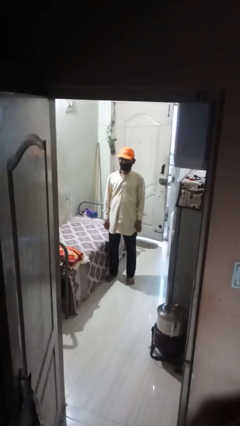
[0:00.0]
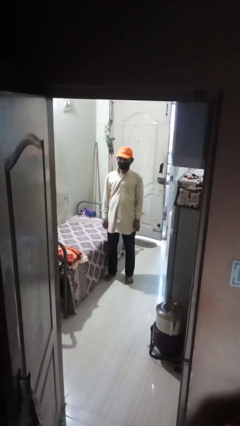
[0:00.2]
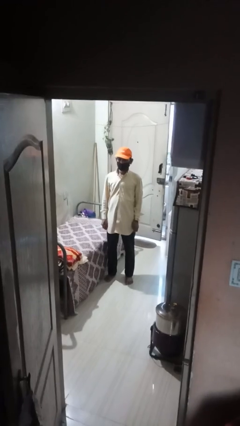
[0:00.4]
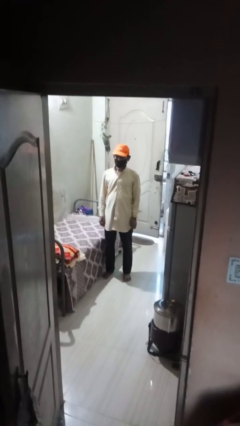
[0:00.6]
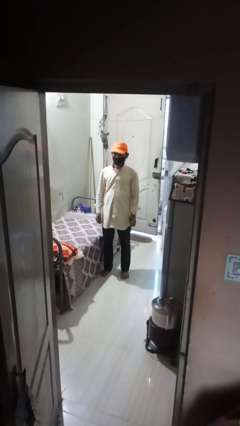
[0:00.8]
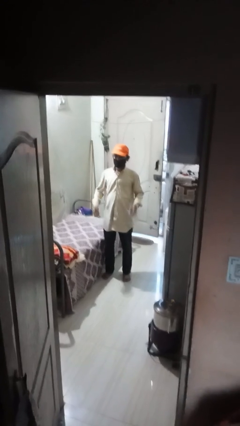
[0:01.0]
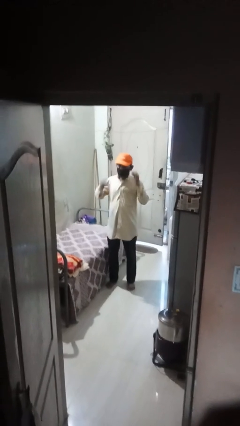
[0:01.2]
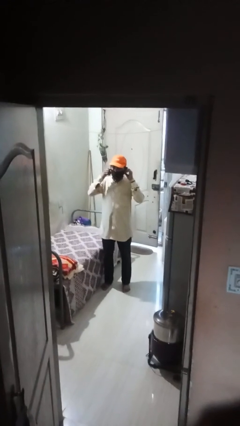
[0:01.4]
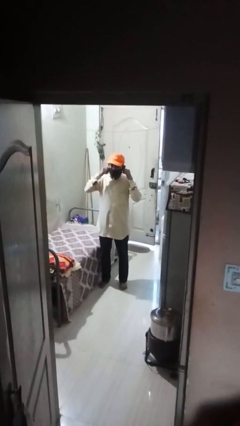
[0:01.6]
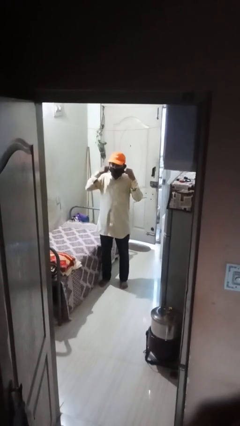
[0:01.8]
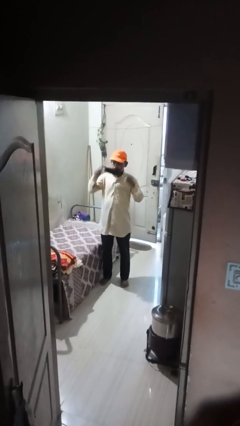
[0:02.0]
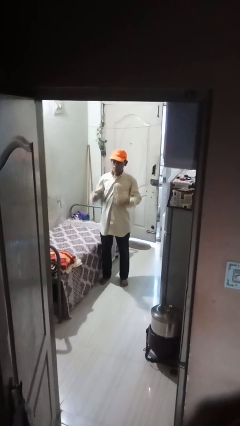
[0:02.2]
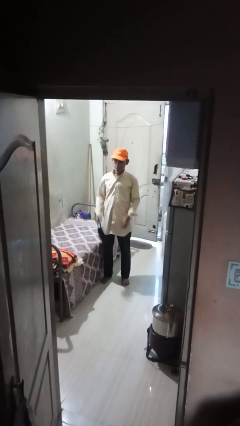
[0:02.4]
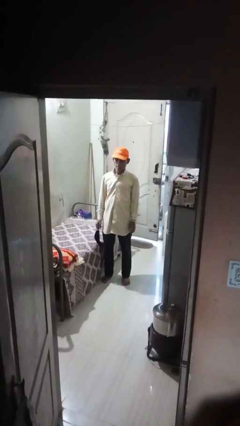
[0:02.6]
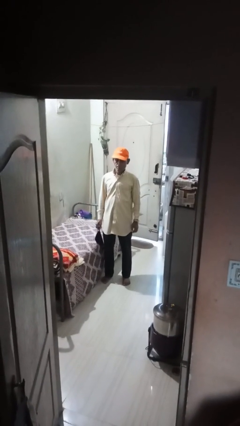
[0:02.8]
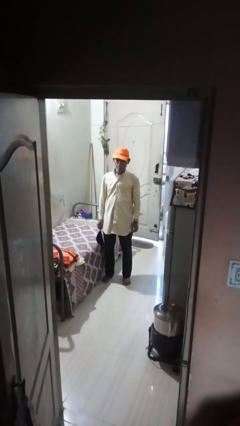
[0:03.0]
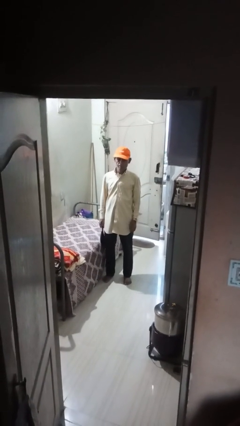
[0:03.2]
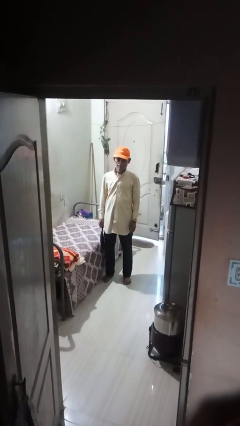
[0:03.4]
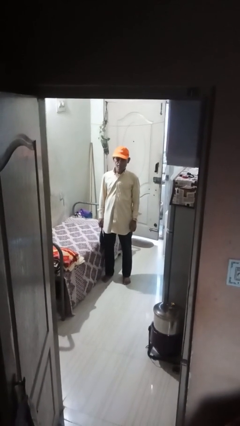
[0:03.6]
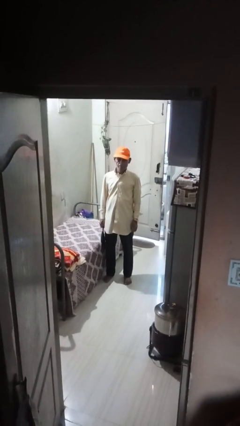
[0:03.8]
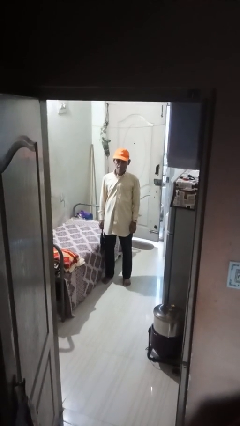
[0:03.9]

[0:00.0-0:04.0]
person takes off facemask

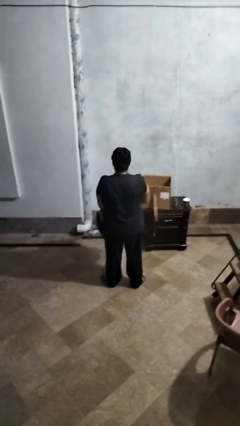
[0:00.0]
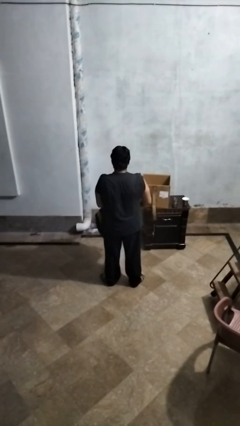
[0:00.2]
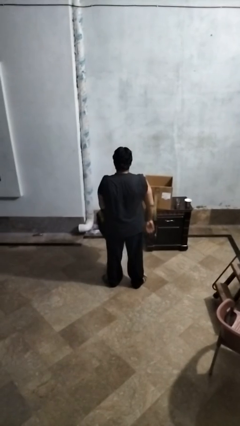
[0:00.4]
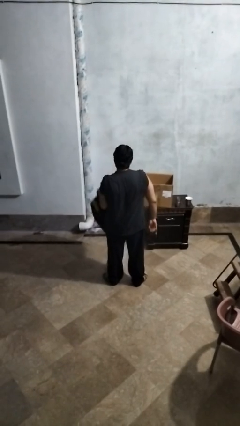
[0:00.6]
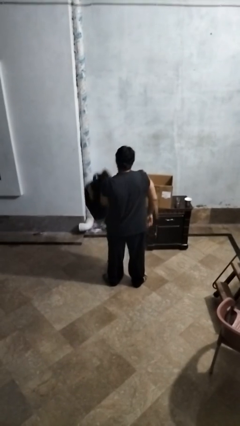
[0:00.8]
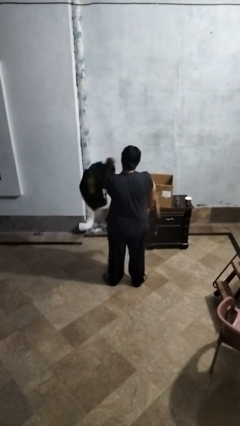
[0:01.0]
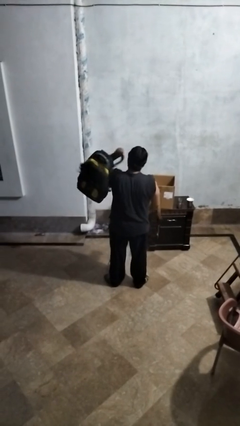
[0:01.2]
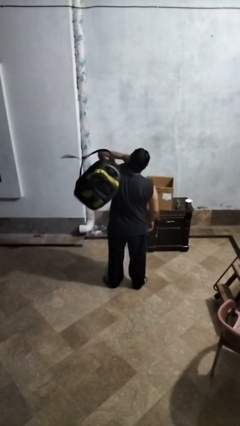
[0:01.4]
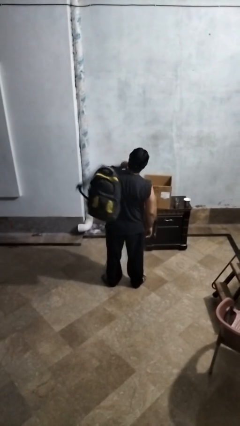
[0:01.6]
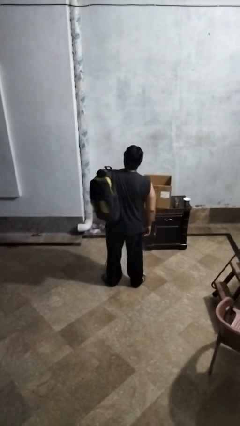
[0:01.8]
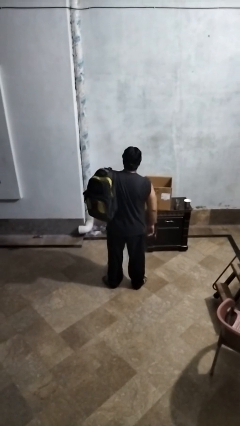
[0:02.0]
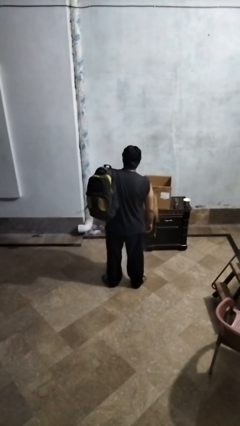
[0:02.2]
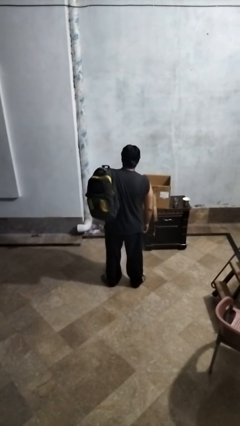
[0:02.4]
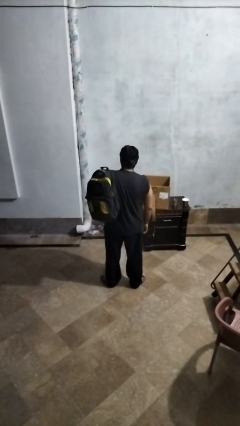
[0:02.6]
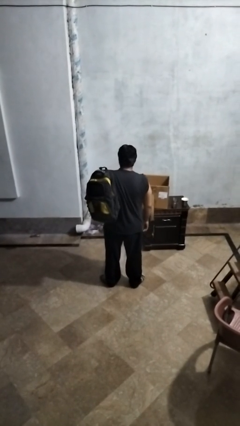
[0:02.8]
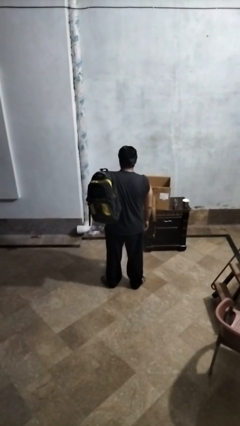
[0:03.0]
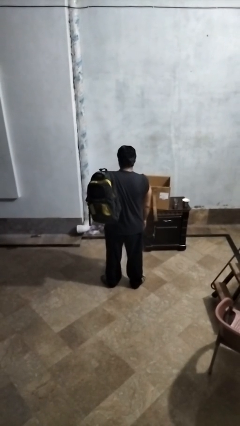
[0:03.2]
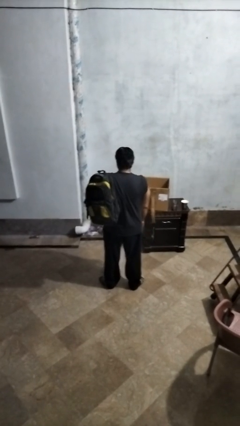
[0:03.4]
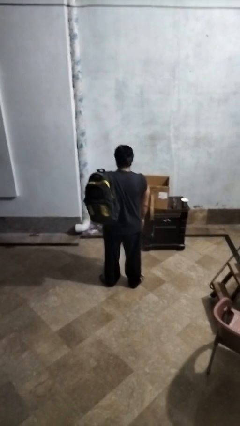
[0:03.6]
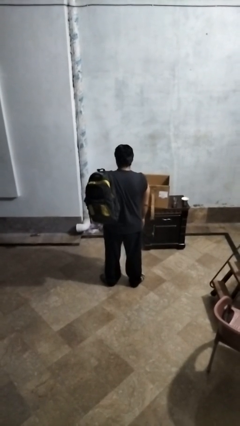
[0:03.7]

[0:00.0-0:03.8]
person puts on backpack

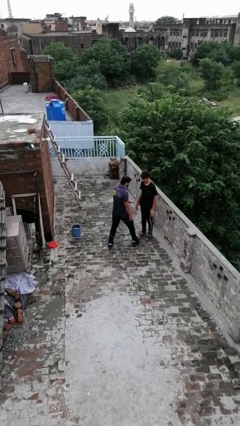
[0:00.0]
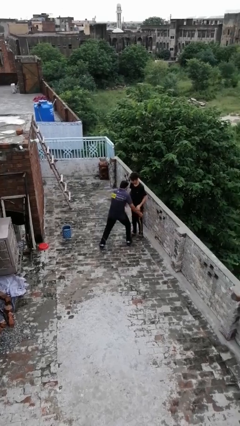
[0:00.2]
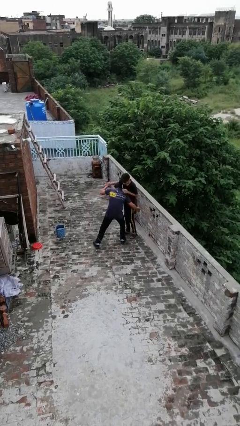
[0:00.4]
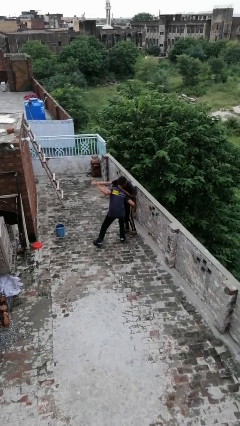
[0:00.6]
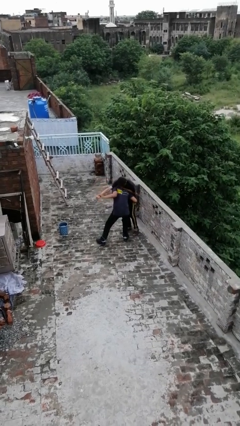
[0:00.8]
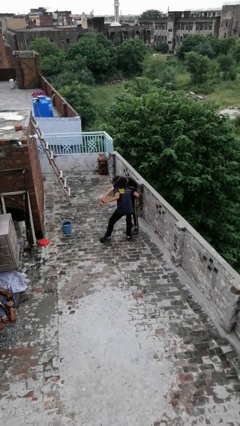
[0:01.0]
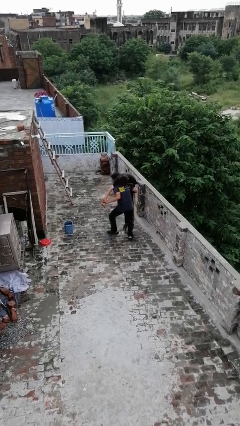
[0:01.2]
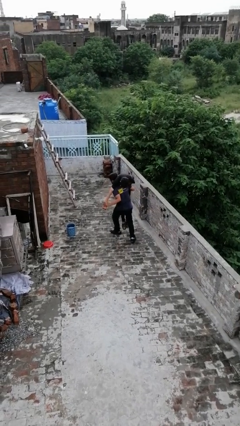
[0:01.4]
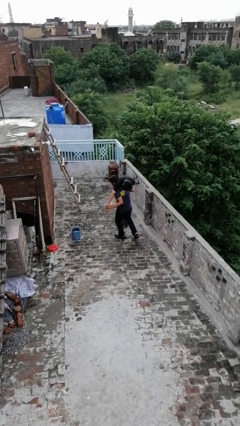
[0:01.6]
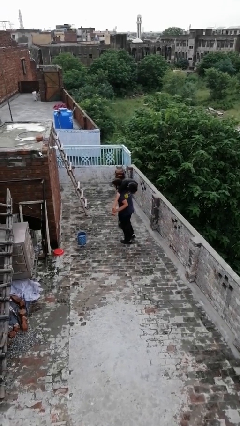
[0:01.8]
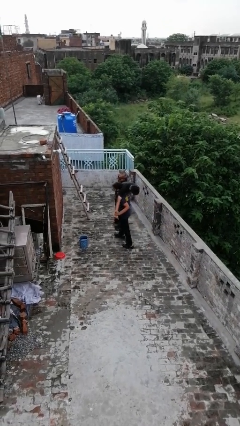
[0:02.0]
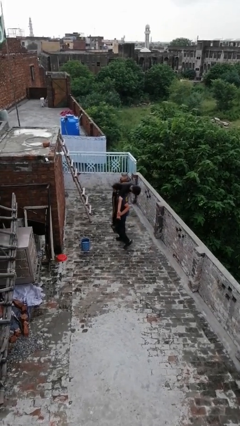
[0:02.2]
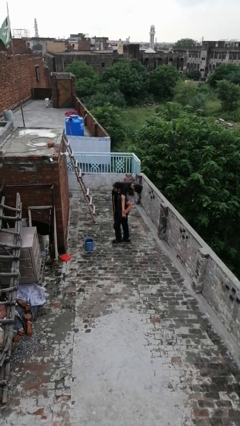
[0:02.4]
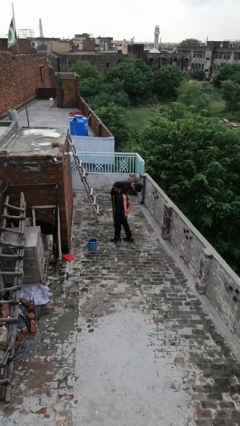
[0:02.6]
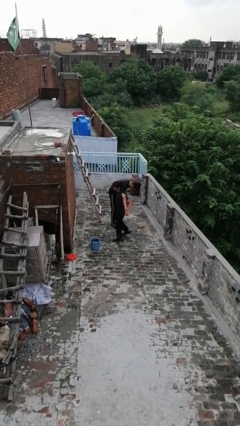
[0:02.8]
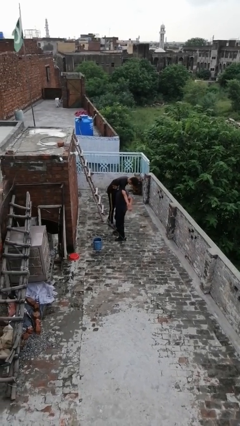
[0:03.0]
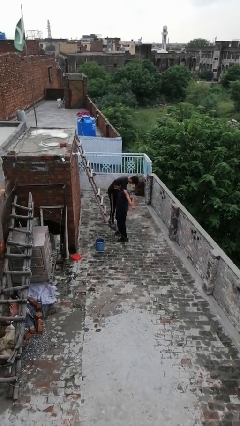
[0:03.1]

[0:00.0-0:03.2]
person carries person on shoulders

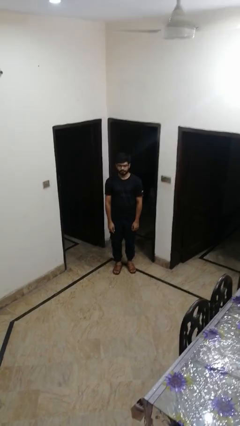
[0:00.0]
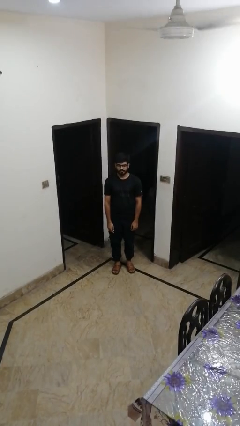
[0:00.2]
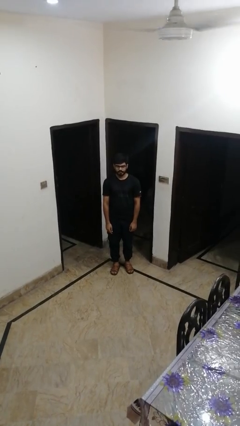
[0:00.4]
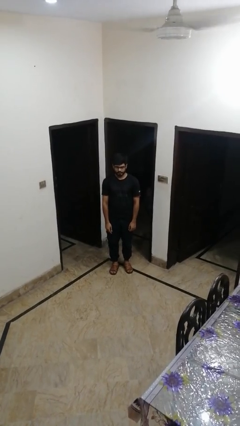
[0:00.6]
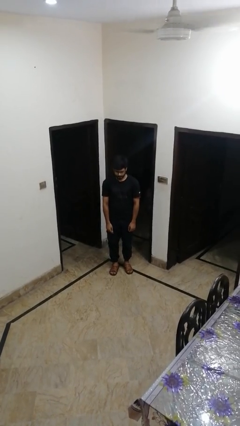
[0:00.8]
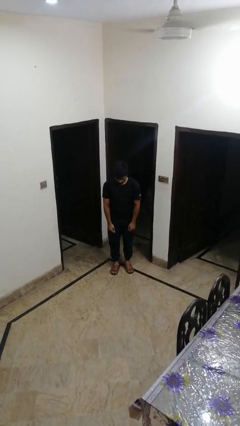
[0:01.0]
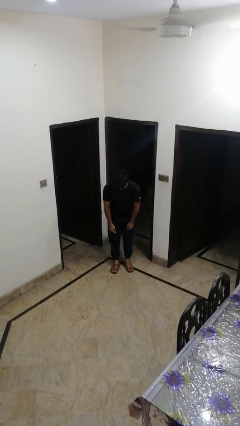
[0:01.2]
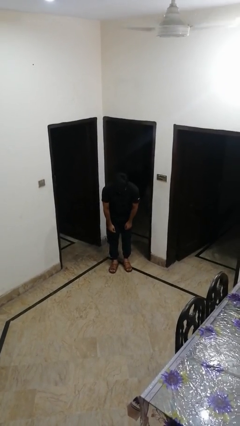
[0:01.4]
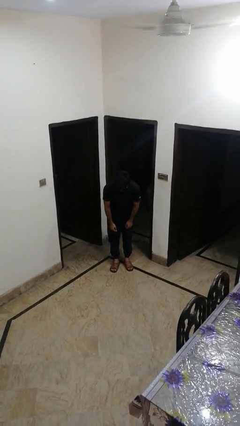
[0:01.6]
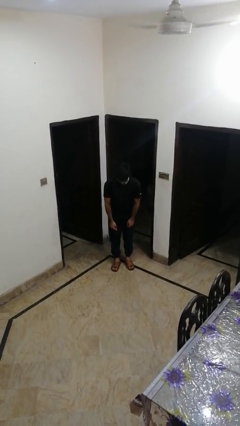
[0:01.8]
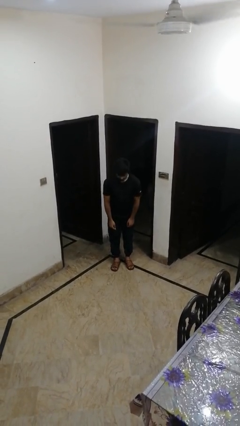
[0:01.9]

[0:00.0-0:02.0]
person bows

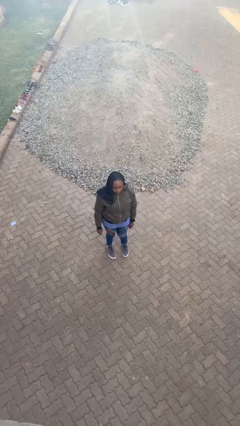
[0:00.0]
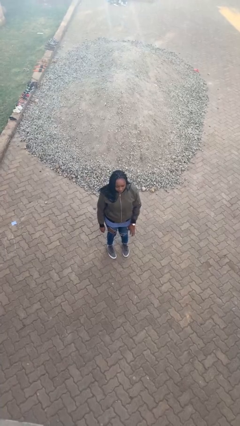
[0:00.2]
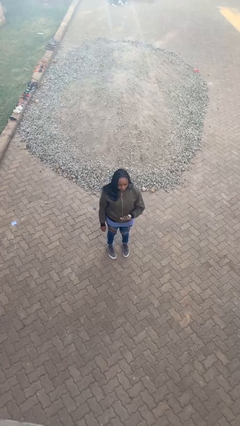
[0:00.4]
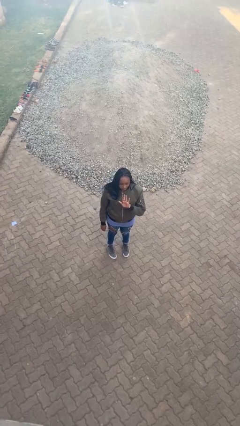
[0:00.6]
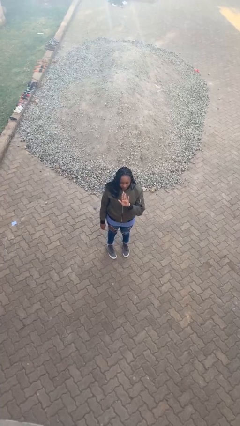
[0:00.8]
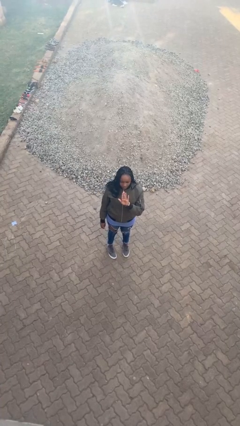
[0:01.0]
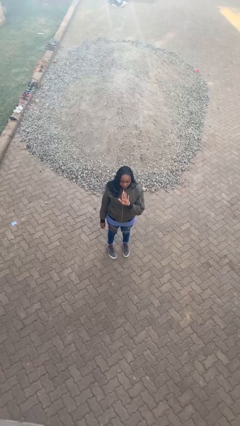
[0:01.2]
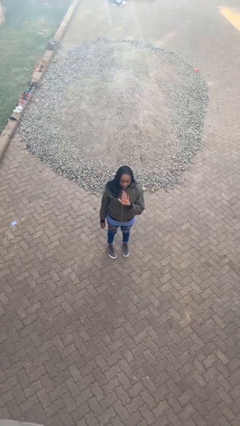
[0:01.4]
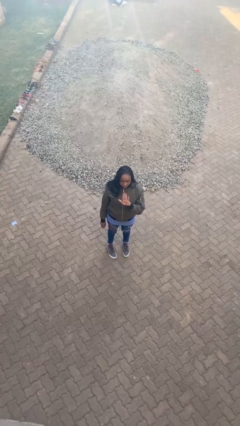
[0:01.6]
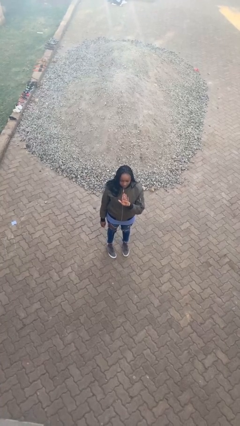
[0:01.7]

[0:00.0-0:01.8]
person gestures stop

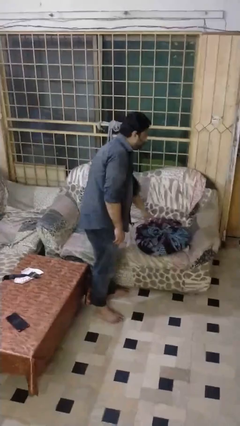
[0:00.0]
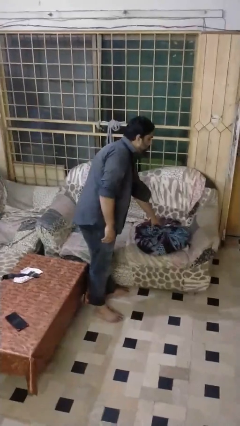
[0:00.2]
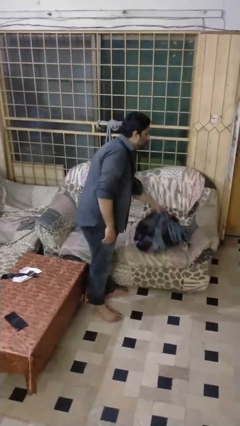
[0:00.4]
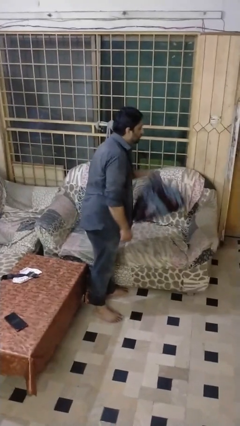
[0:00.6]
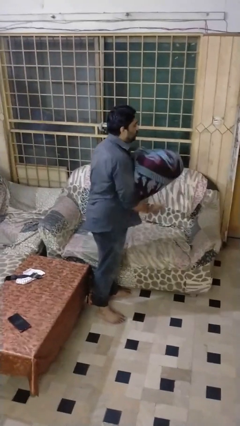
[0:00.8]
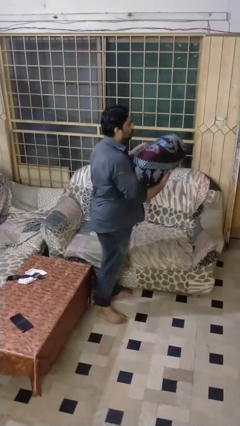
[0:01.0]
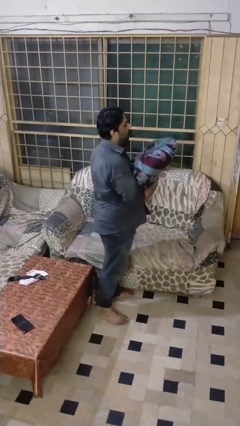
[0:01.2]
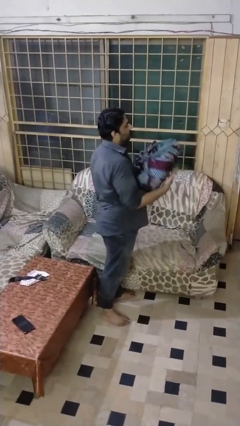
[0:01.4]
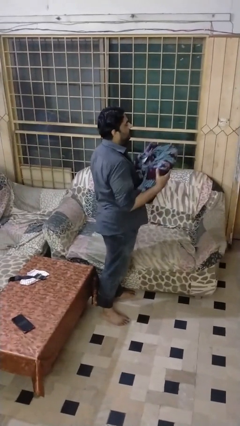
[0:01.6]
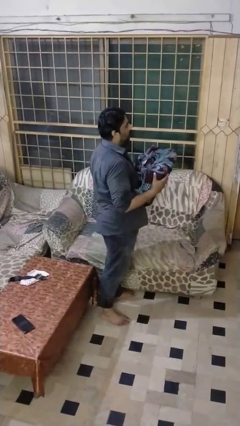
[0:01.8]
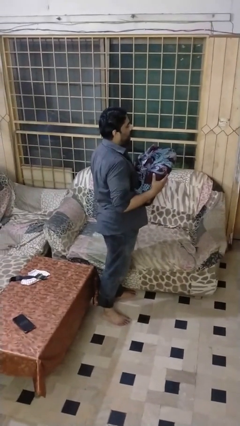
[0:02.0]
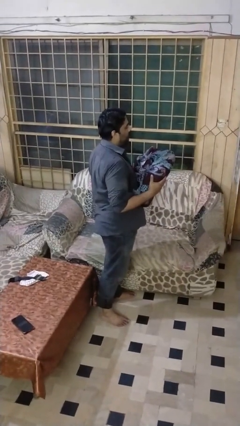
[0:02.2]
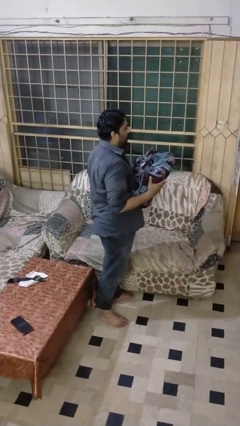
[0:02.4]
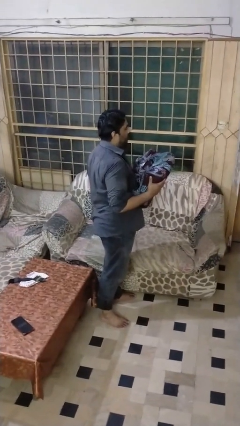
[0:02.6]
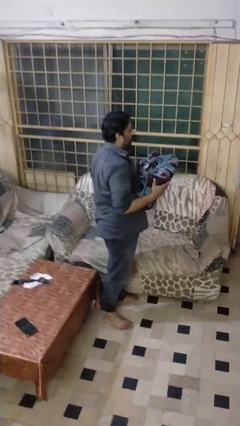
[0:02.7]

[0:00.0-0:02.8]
person picks up object from couch
